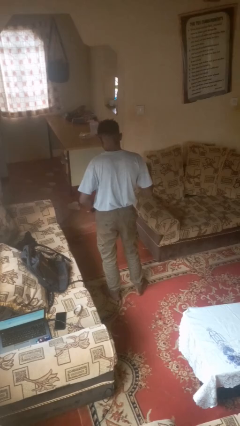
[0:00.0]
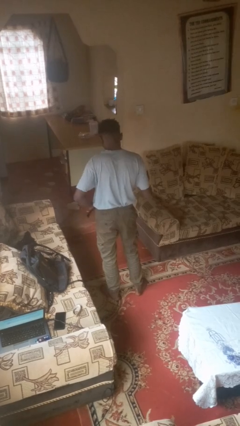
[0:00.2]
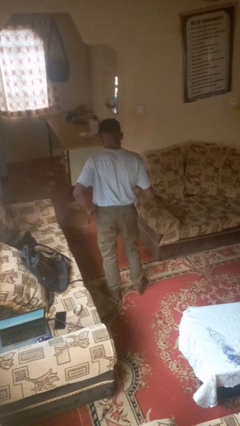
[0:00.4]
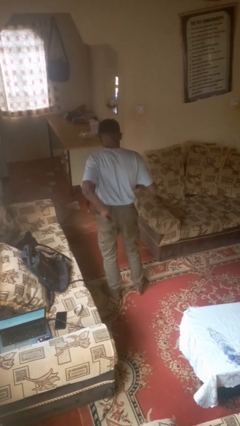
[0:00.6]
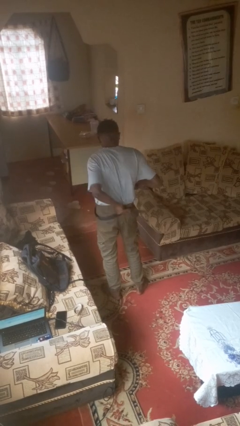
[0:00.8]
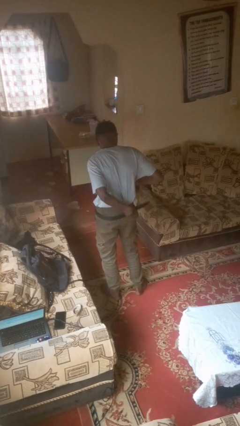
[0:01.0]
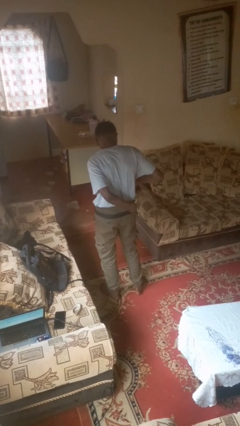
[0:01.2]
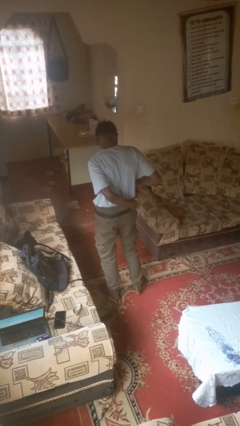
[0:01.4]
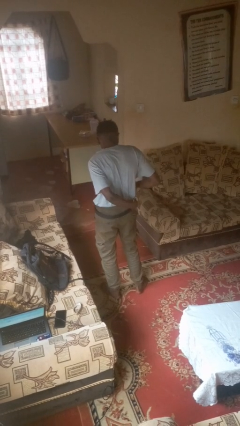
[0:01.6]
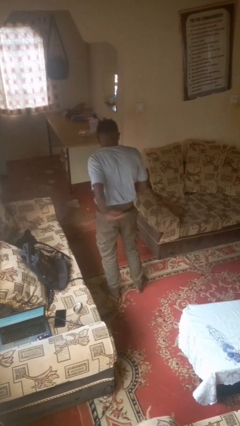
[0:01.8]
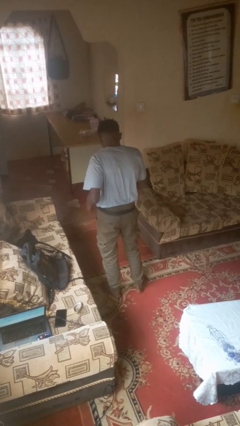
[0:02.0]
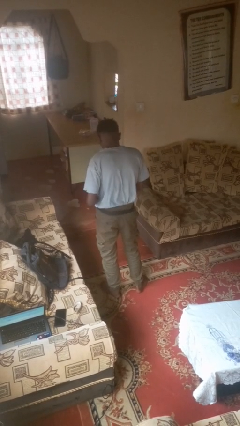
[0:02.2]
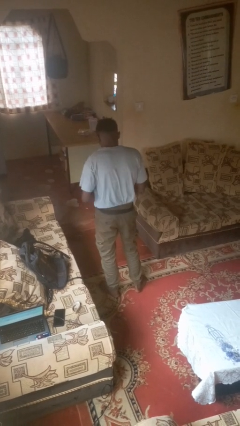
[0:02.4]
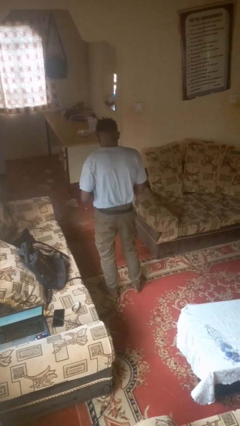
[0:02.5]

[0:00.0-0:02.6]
person puts on belt

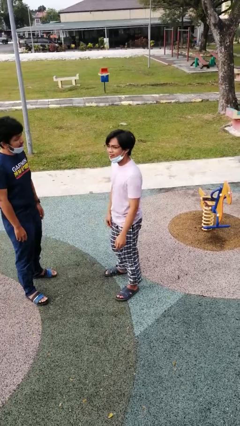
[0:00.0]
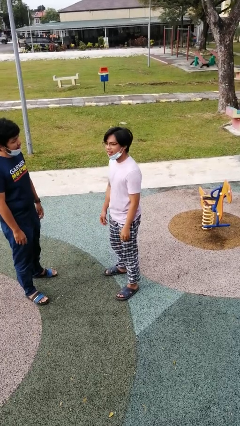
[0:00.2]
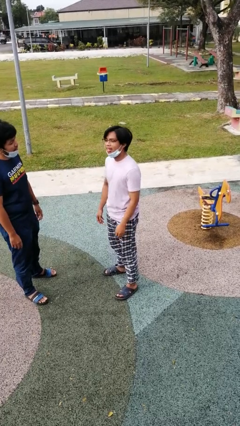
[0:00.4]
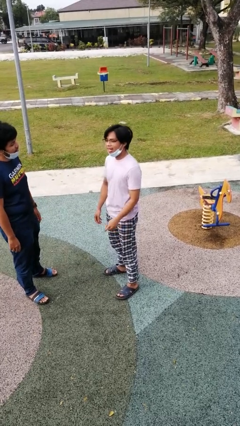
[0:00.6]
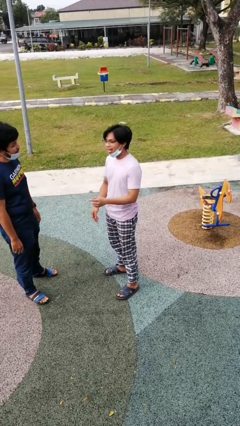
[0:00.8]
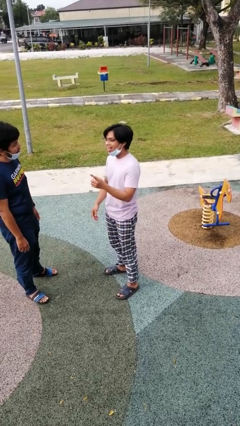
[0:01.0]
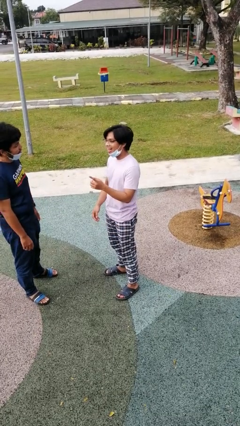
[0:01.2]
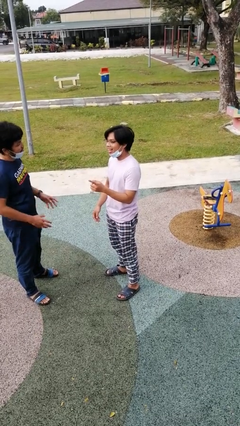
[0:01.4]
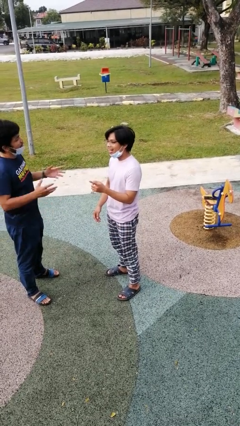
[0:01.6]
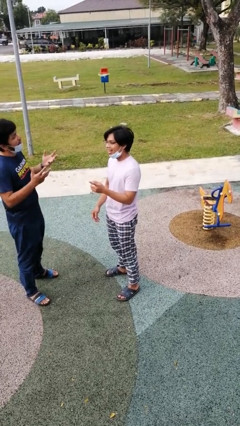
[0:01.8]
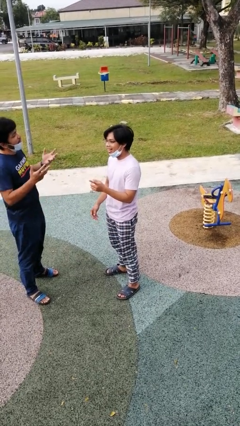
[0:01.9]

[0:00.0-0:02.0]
person talks to person

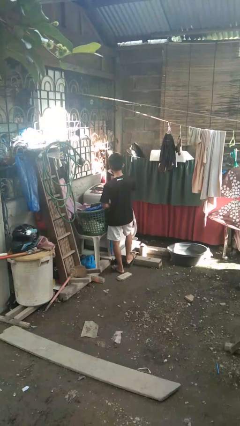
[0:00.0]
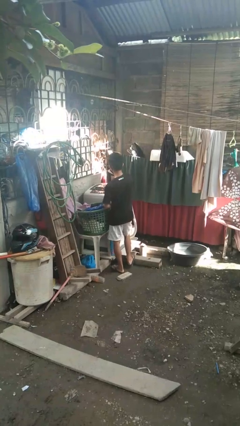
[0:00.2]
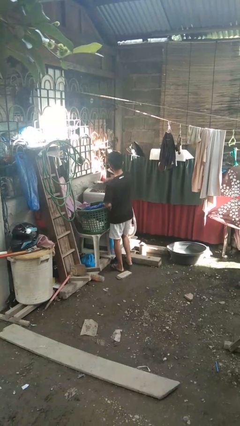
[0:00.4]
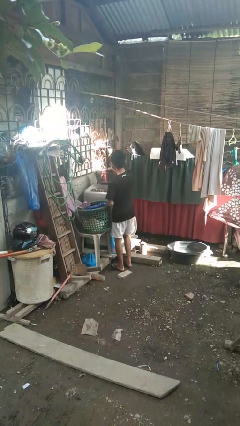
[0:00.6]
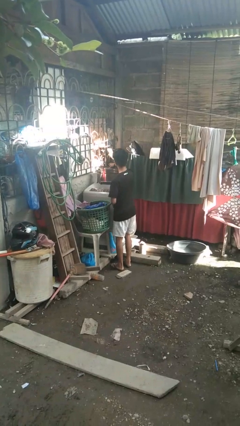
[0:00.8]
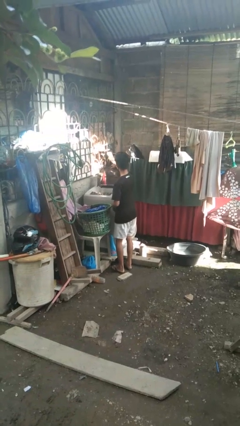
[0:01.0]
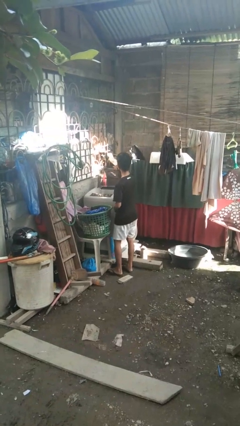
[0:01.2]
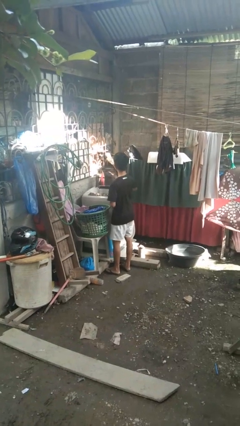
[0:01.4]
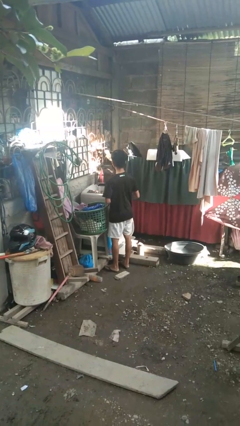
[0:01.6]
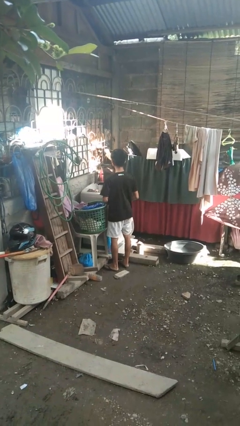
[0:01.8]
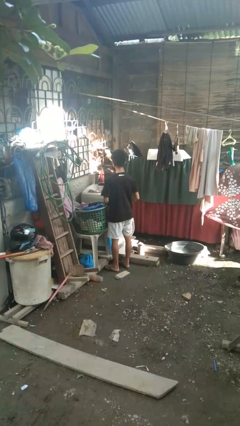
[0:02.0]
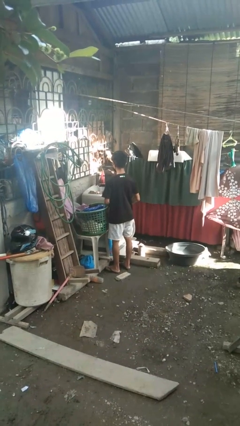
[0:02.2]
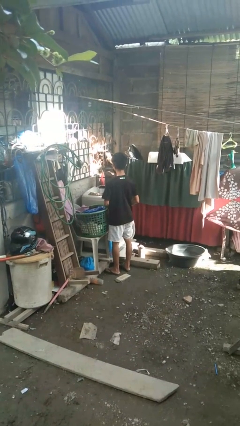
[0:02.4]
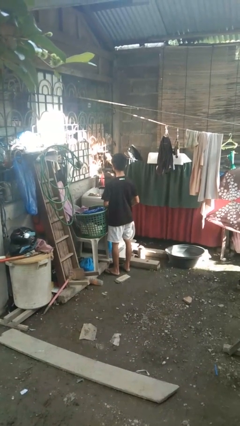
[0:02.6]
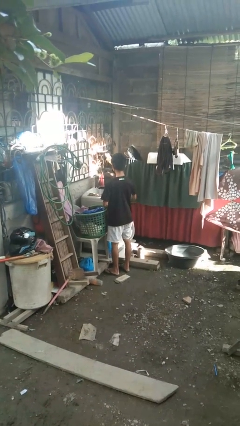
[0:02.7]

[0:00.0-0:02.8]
person opens clothes washer

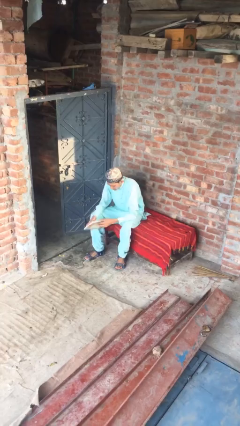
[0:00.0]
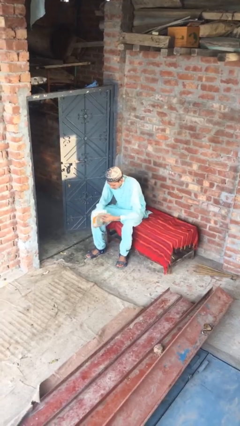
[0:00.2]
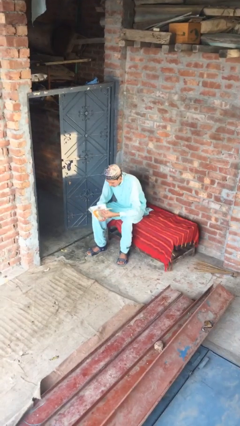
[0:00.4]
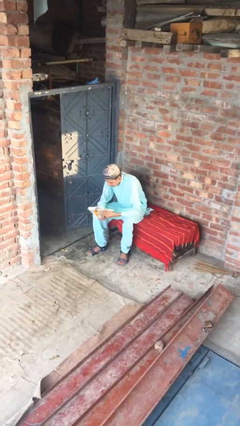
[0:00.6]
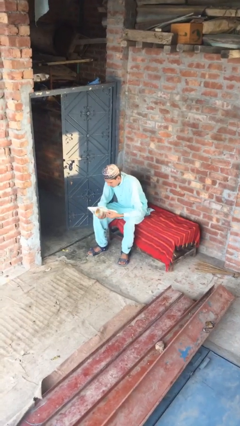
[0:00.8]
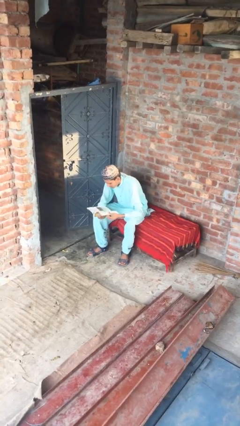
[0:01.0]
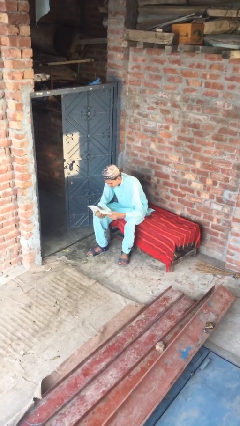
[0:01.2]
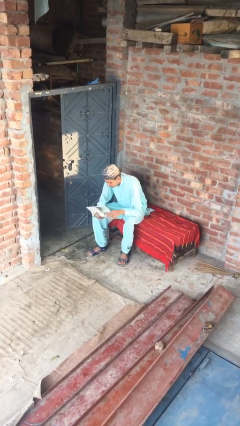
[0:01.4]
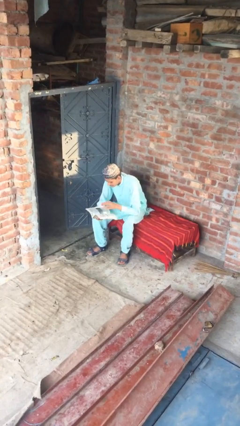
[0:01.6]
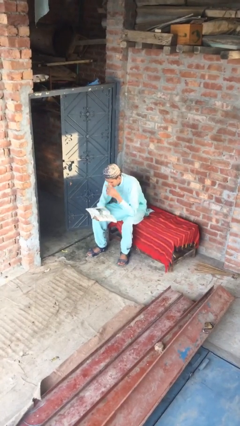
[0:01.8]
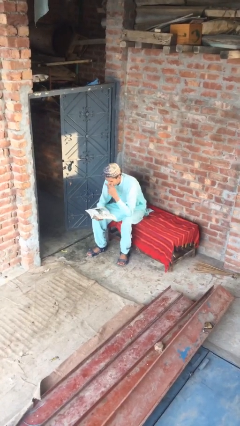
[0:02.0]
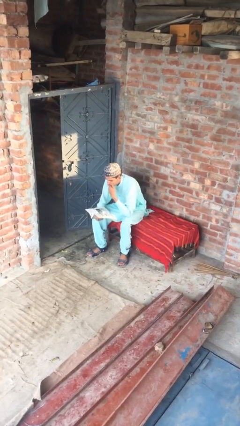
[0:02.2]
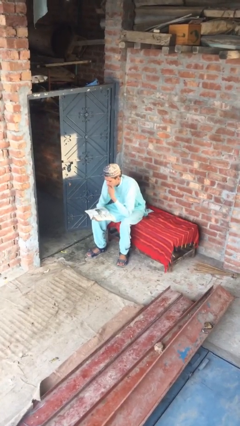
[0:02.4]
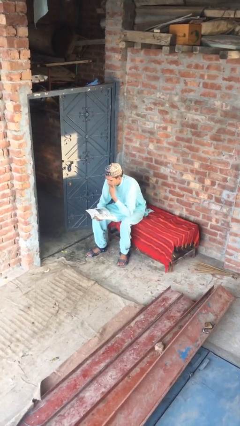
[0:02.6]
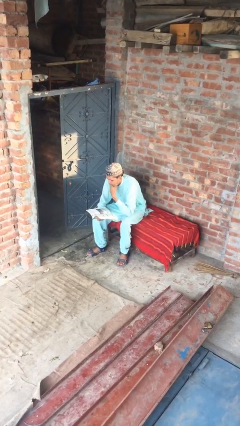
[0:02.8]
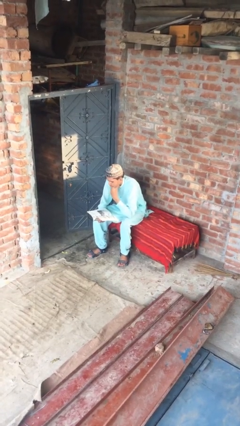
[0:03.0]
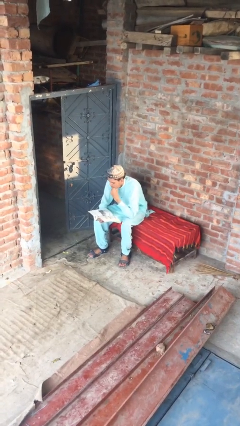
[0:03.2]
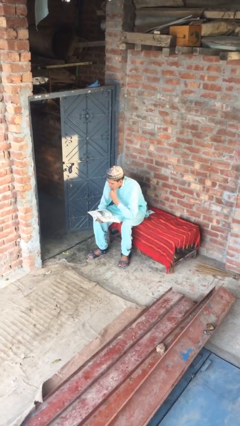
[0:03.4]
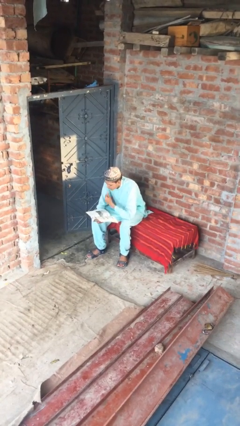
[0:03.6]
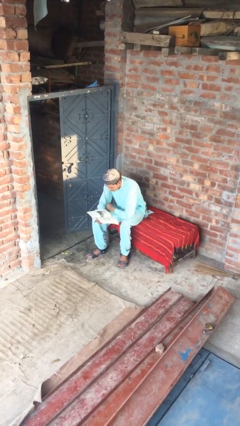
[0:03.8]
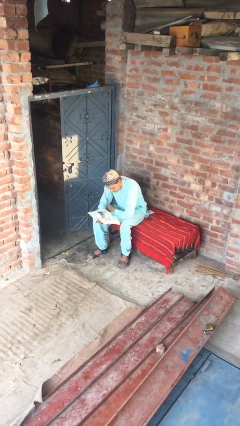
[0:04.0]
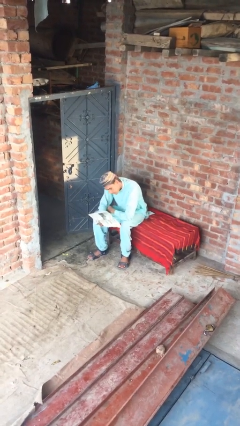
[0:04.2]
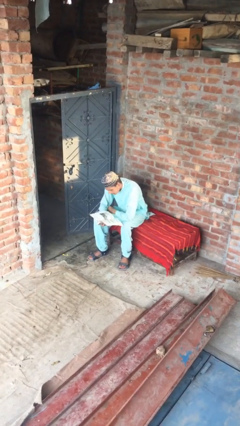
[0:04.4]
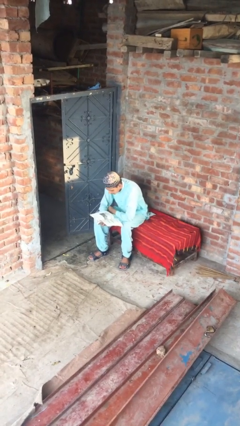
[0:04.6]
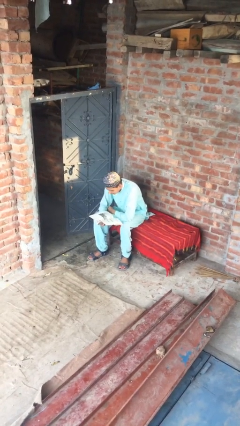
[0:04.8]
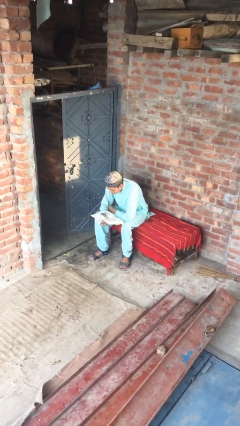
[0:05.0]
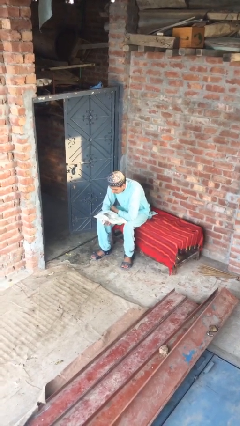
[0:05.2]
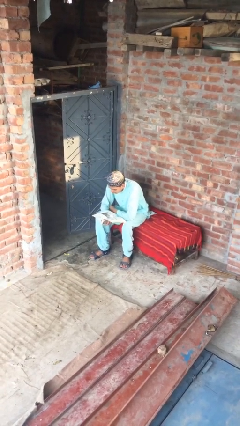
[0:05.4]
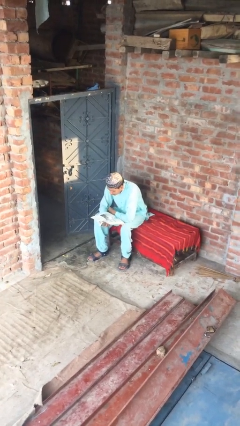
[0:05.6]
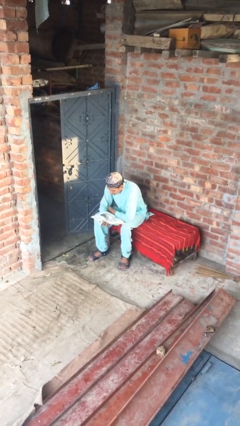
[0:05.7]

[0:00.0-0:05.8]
person reads document

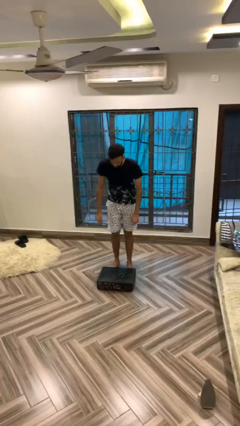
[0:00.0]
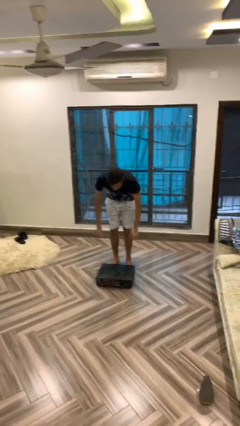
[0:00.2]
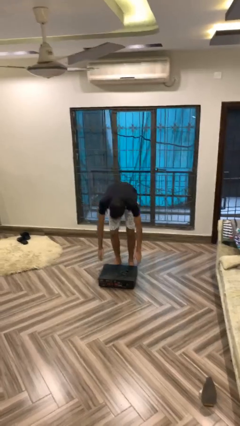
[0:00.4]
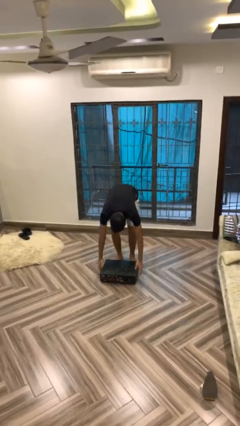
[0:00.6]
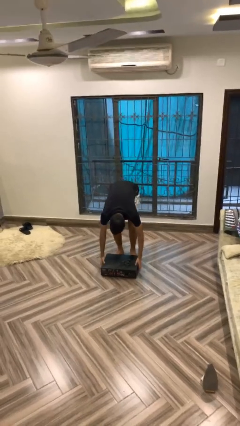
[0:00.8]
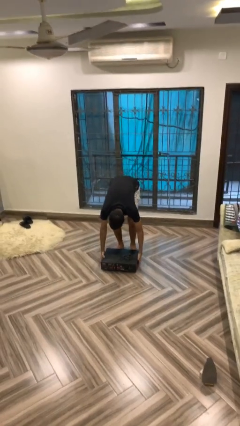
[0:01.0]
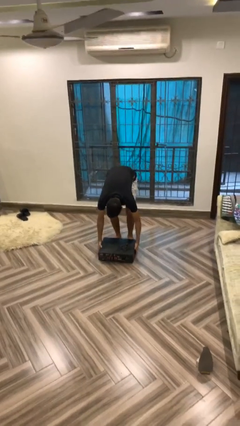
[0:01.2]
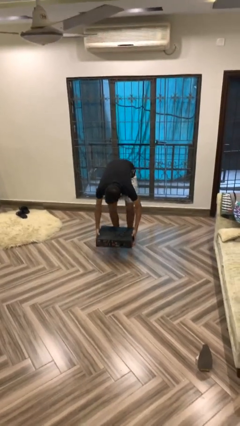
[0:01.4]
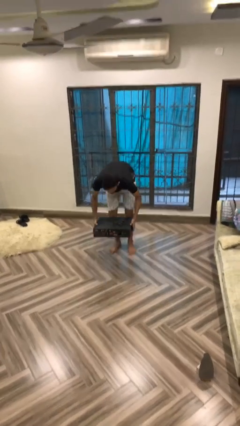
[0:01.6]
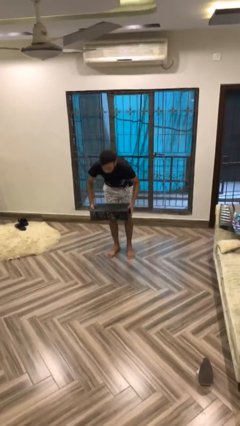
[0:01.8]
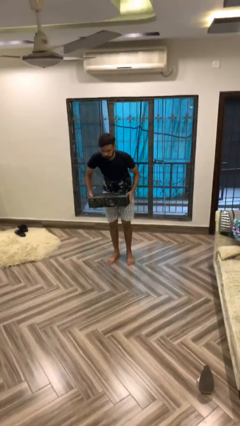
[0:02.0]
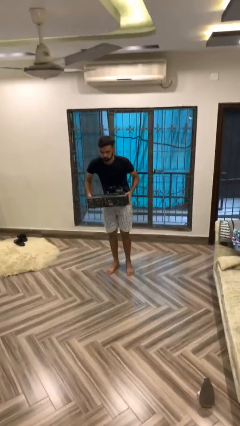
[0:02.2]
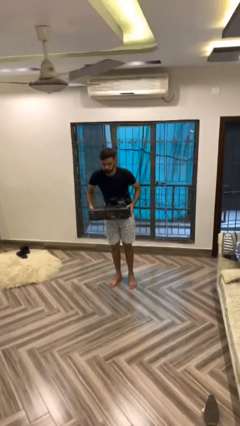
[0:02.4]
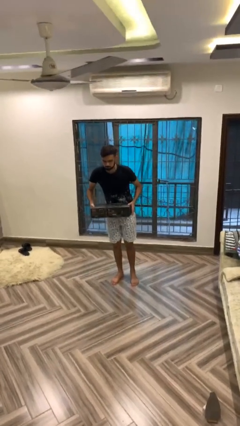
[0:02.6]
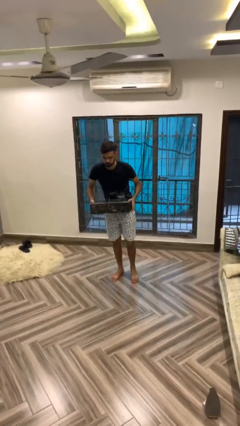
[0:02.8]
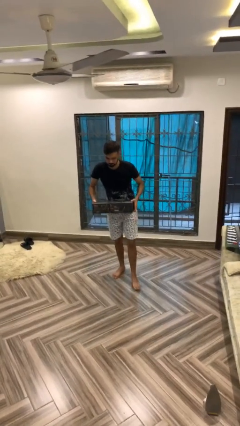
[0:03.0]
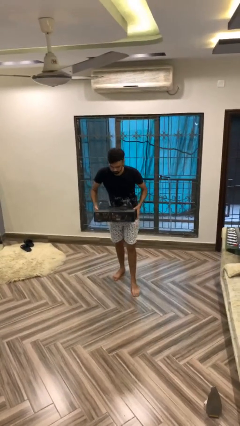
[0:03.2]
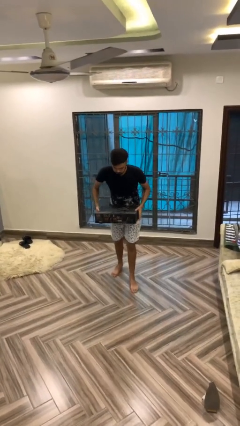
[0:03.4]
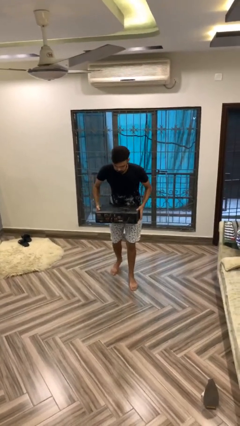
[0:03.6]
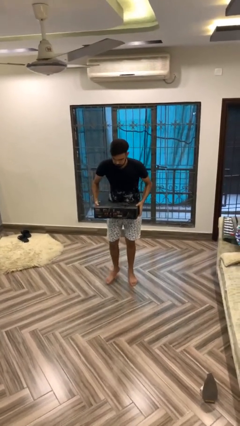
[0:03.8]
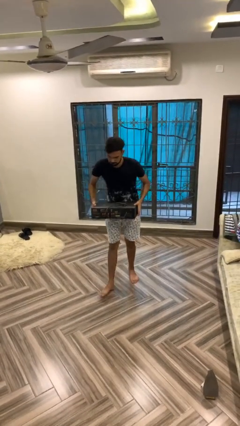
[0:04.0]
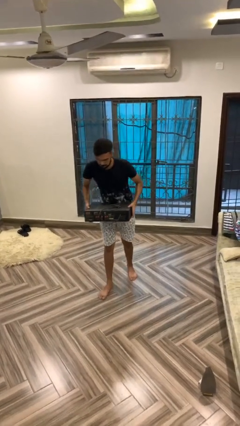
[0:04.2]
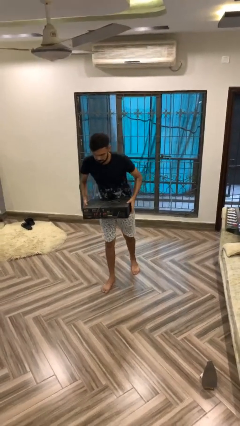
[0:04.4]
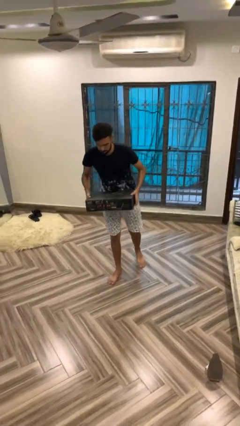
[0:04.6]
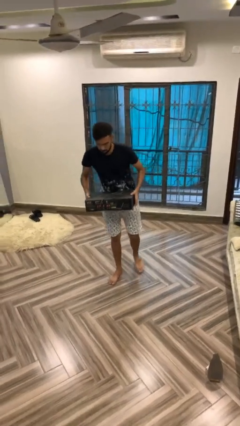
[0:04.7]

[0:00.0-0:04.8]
person carries heavy object
